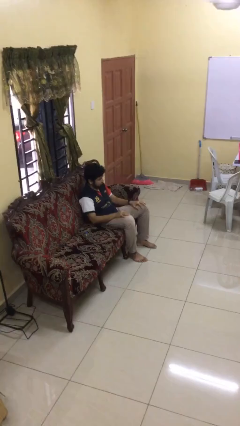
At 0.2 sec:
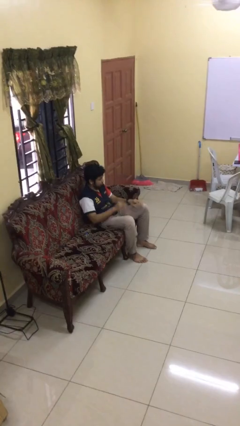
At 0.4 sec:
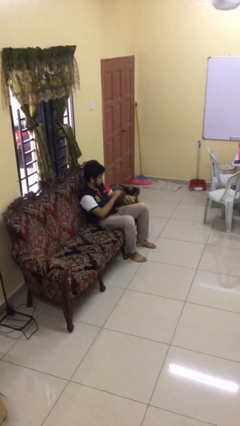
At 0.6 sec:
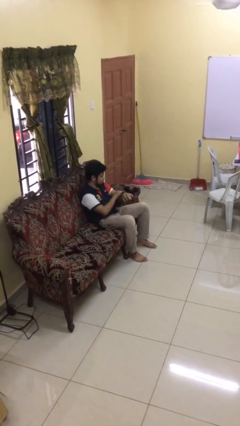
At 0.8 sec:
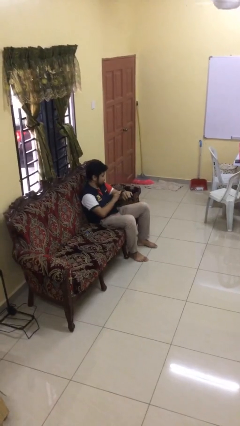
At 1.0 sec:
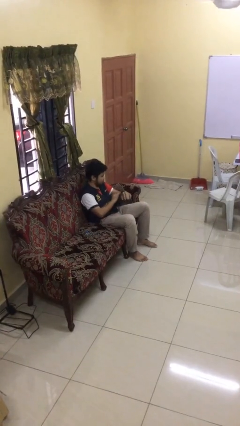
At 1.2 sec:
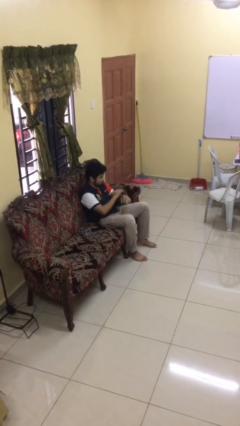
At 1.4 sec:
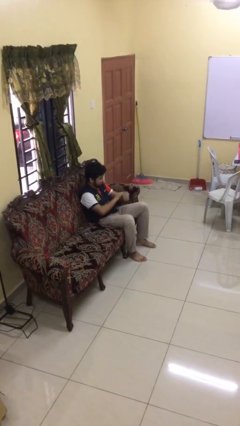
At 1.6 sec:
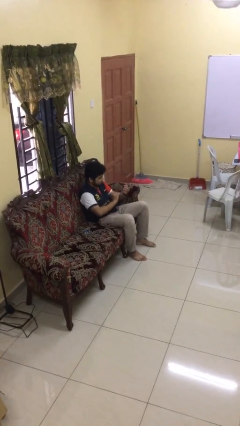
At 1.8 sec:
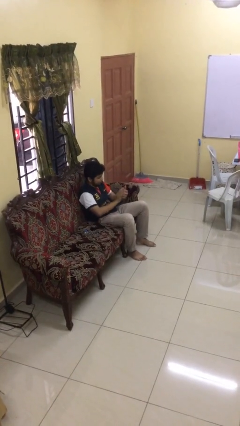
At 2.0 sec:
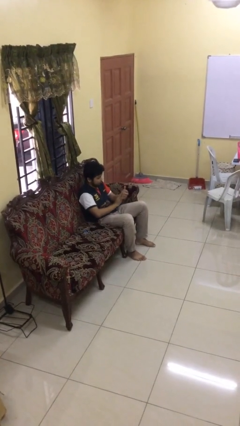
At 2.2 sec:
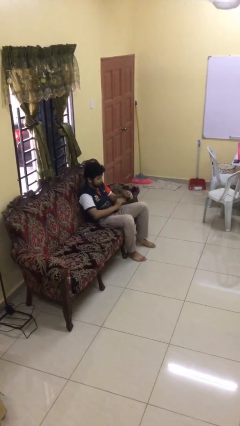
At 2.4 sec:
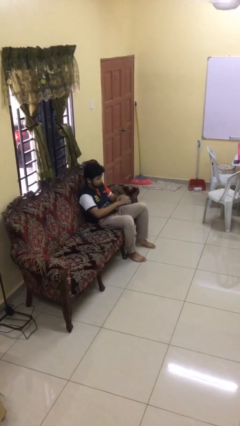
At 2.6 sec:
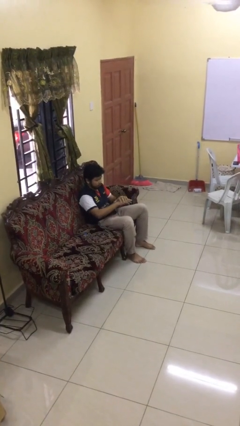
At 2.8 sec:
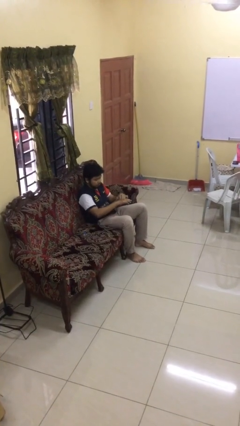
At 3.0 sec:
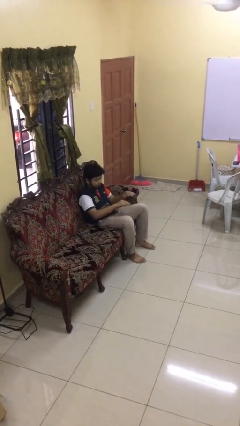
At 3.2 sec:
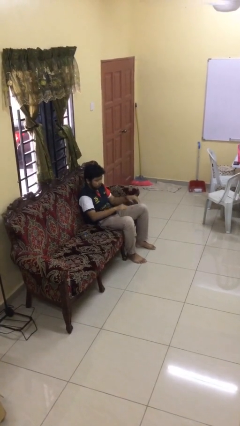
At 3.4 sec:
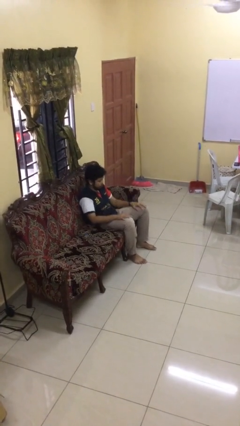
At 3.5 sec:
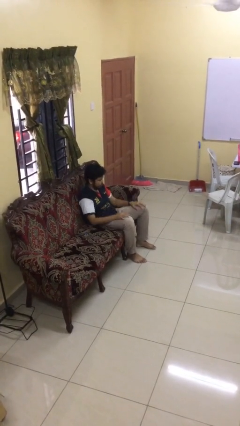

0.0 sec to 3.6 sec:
person looks at hands in lap

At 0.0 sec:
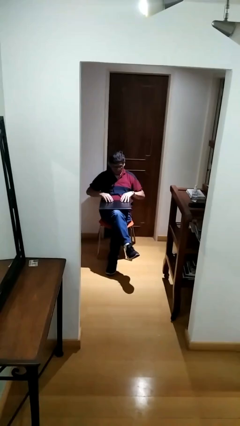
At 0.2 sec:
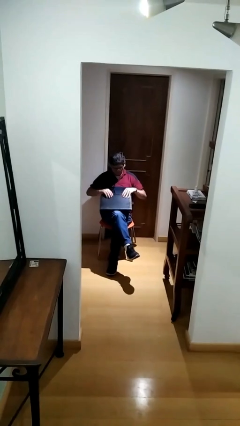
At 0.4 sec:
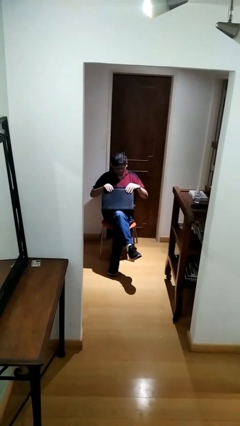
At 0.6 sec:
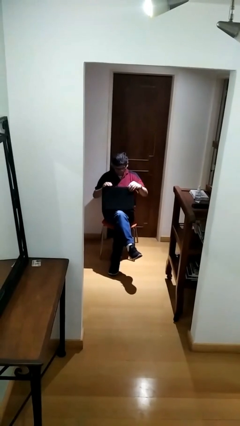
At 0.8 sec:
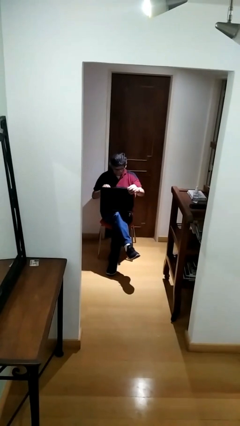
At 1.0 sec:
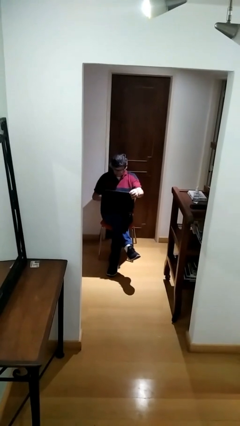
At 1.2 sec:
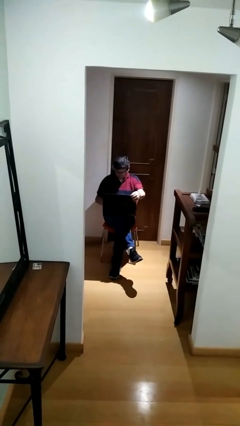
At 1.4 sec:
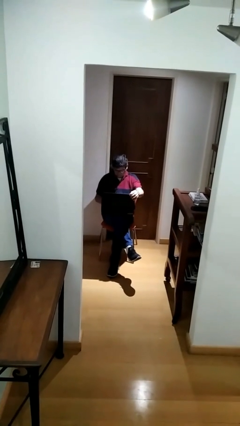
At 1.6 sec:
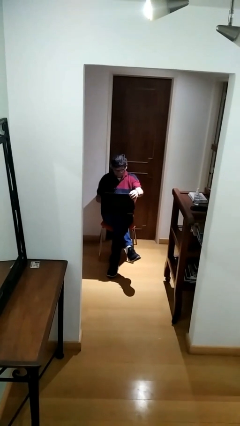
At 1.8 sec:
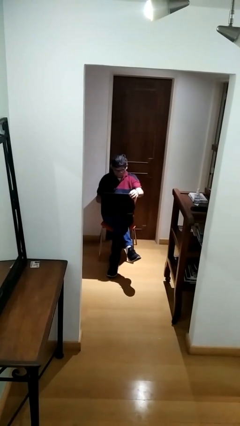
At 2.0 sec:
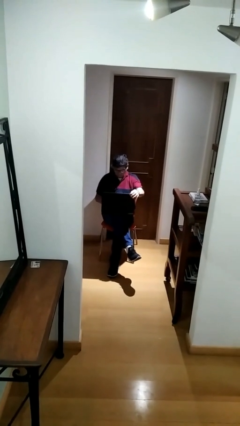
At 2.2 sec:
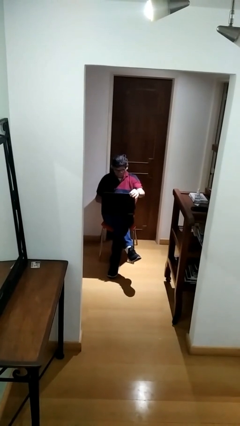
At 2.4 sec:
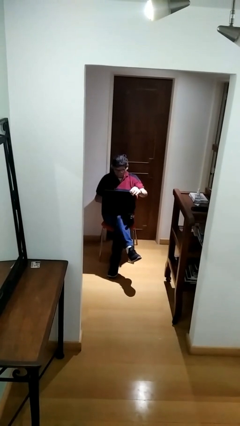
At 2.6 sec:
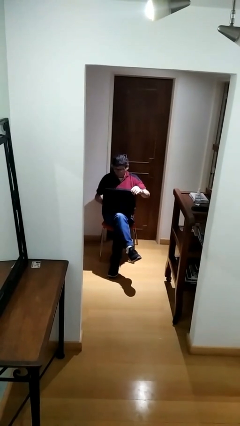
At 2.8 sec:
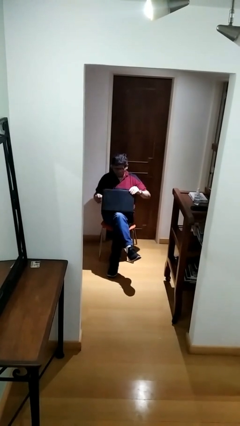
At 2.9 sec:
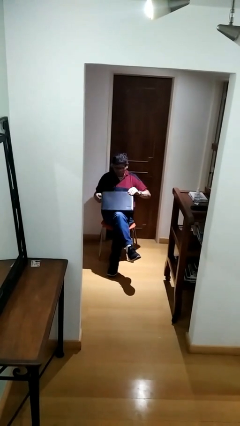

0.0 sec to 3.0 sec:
person interacts with laptop

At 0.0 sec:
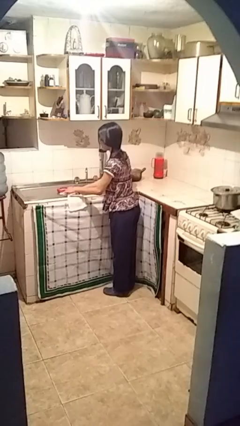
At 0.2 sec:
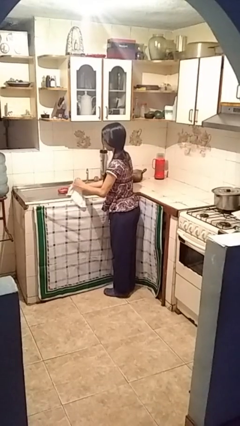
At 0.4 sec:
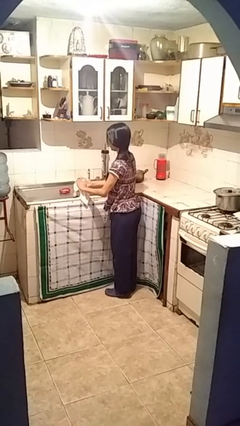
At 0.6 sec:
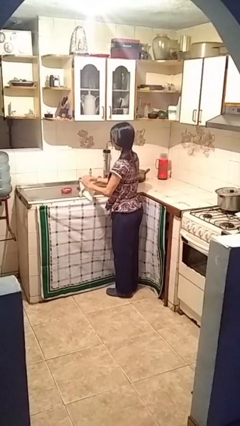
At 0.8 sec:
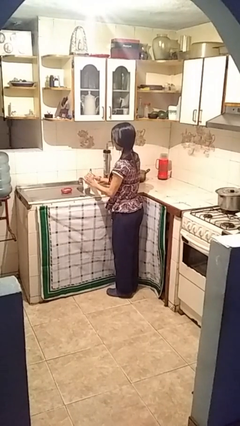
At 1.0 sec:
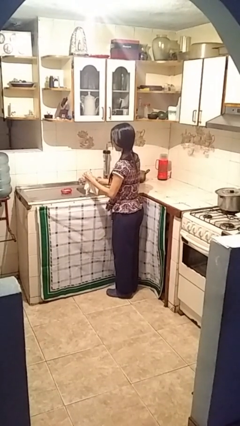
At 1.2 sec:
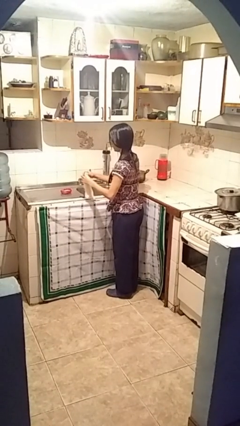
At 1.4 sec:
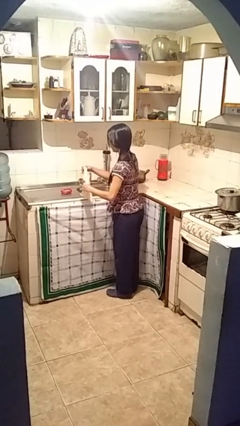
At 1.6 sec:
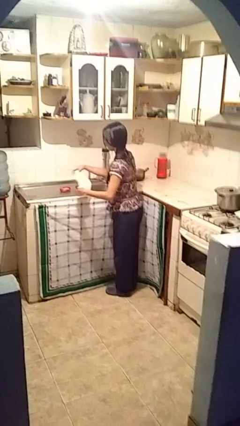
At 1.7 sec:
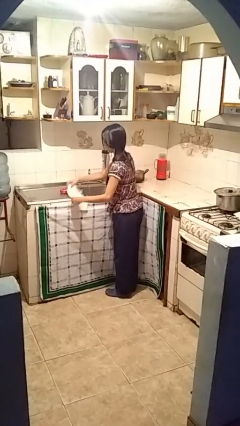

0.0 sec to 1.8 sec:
person dries hands with towel

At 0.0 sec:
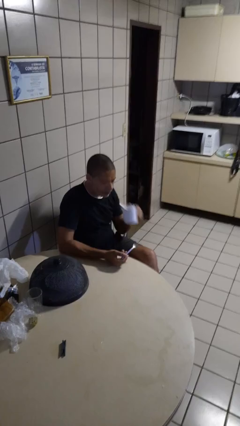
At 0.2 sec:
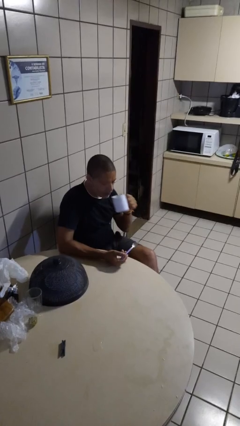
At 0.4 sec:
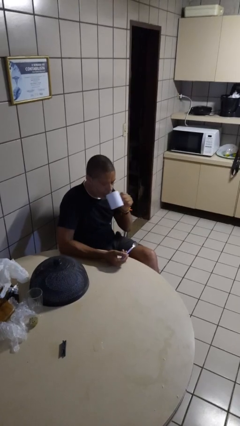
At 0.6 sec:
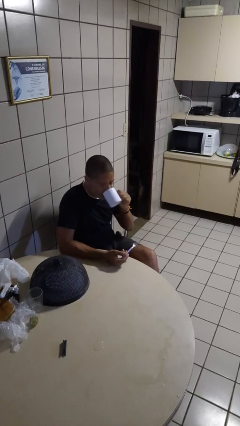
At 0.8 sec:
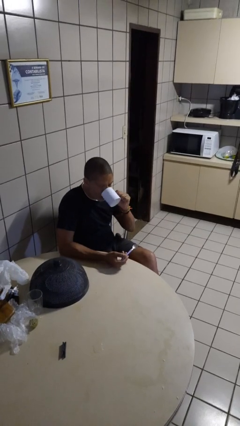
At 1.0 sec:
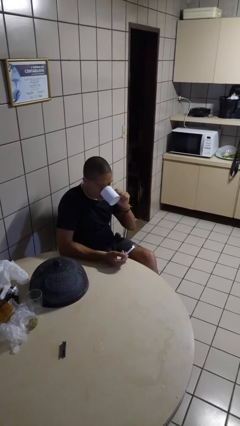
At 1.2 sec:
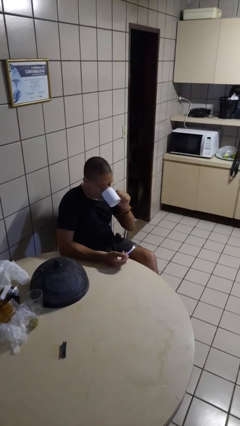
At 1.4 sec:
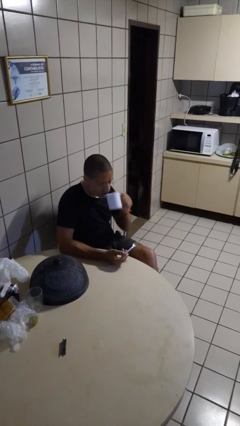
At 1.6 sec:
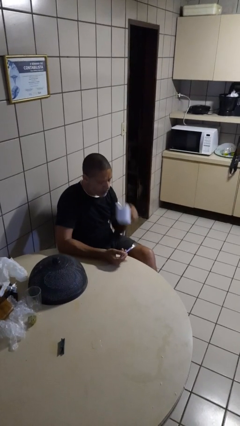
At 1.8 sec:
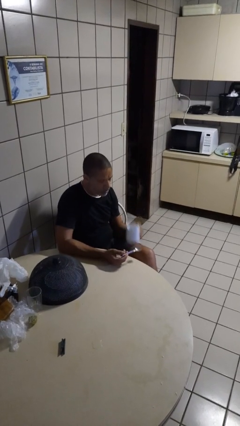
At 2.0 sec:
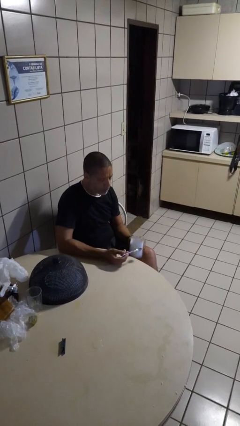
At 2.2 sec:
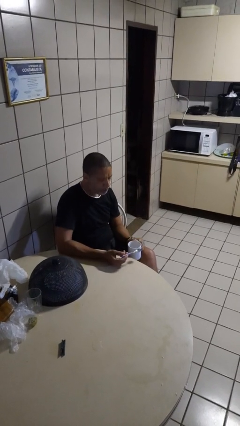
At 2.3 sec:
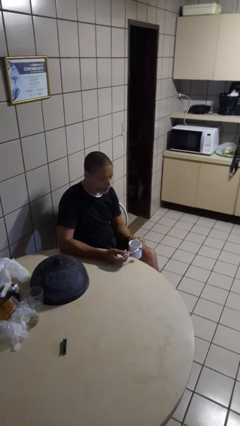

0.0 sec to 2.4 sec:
person drinks from mug

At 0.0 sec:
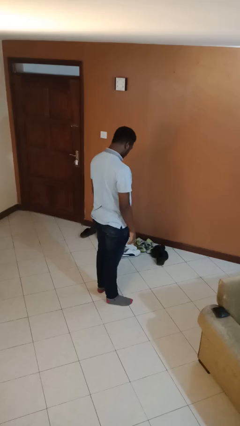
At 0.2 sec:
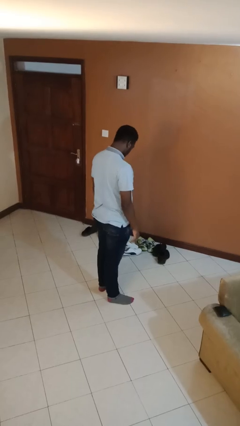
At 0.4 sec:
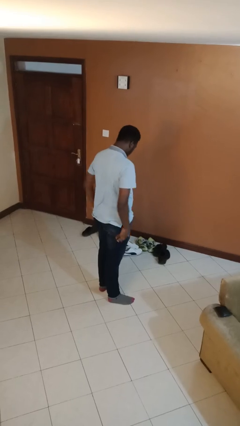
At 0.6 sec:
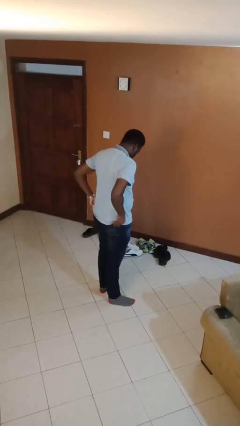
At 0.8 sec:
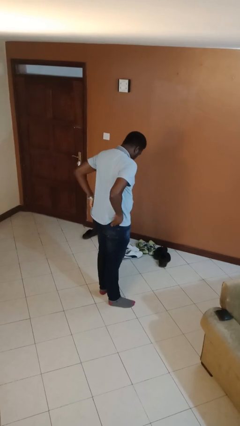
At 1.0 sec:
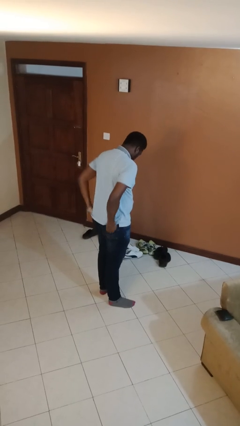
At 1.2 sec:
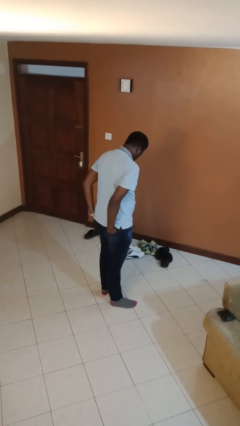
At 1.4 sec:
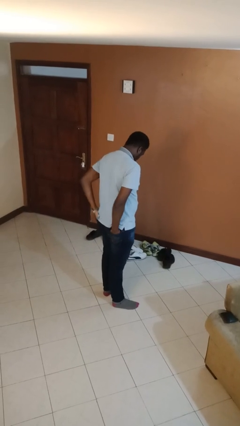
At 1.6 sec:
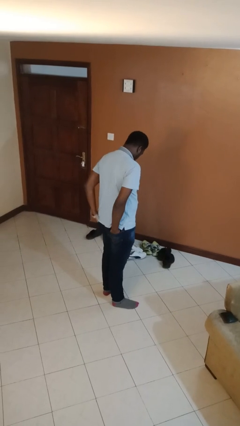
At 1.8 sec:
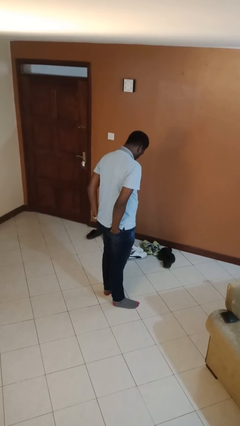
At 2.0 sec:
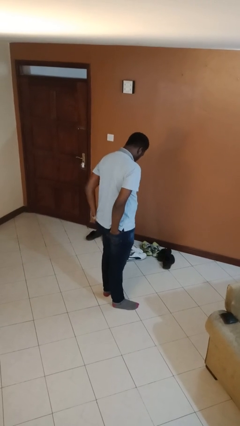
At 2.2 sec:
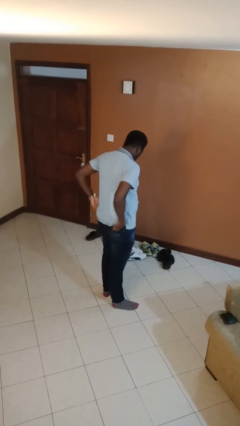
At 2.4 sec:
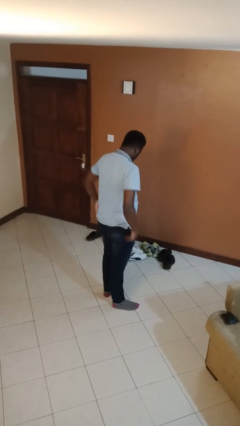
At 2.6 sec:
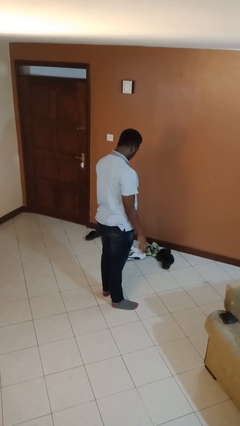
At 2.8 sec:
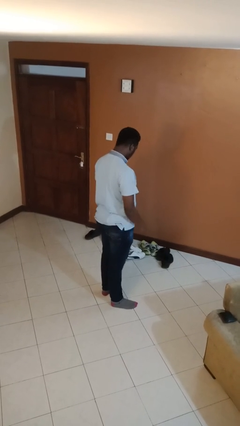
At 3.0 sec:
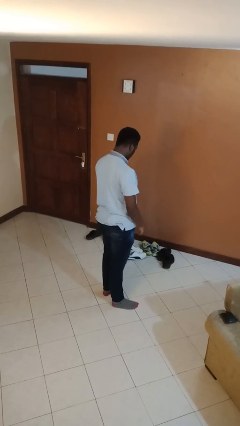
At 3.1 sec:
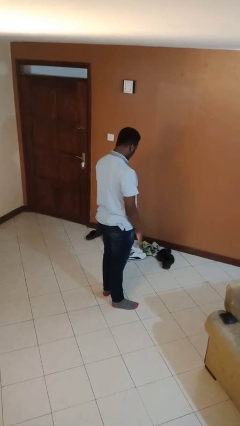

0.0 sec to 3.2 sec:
person puts hands in back pockets

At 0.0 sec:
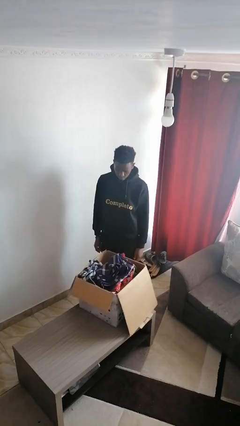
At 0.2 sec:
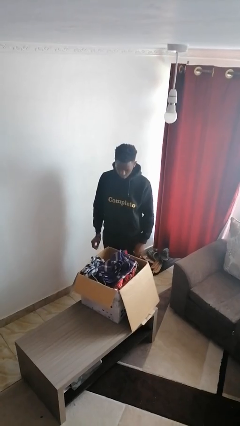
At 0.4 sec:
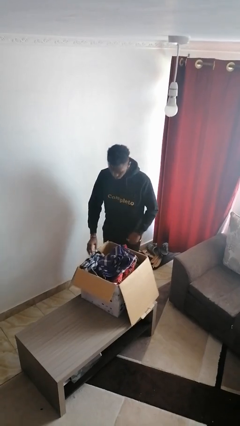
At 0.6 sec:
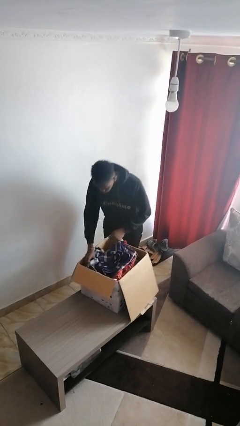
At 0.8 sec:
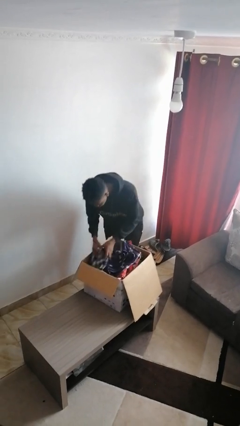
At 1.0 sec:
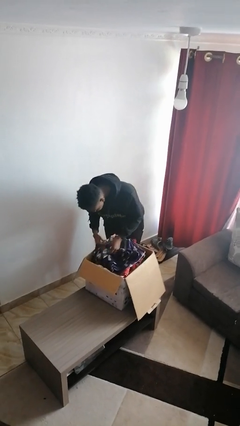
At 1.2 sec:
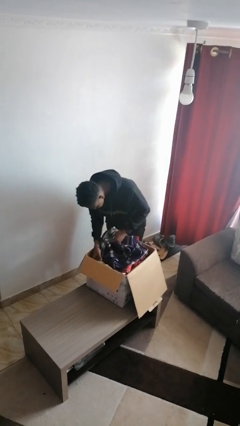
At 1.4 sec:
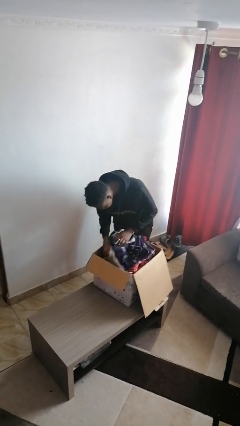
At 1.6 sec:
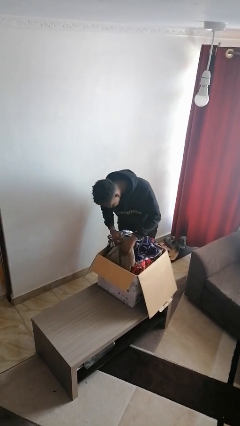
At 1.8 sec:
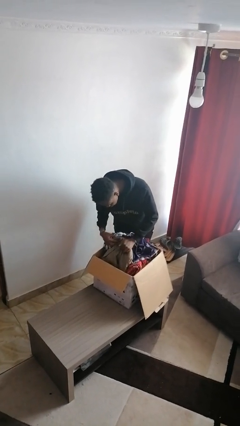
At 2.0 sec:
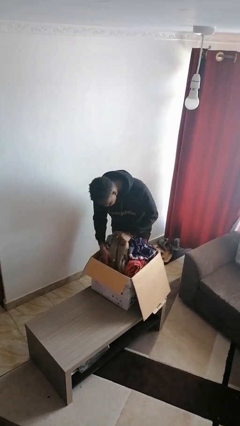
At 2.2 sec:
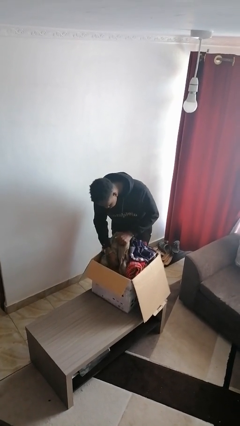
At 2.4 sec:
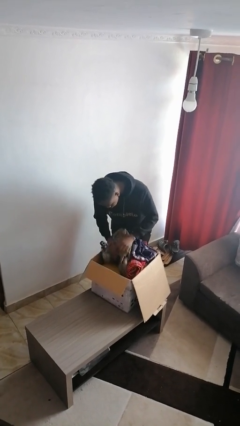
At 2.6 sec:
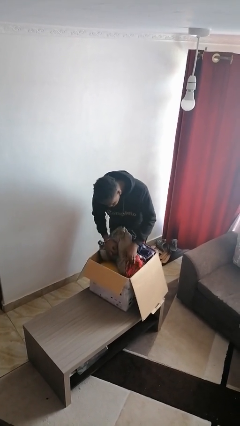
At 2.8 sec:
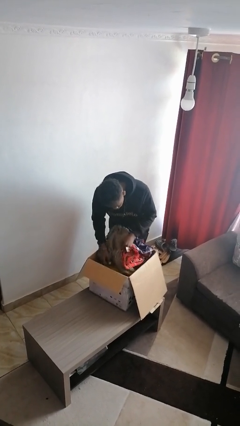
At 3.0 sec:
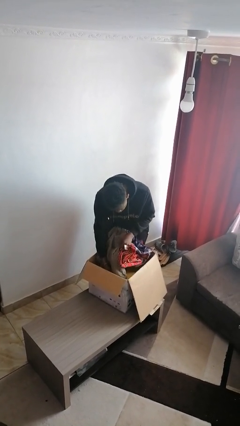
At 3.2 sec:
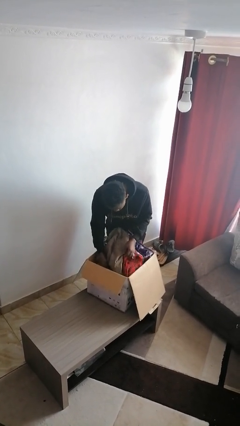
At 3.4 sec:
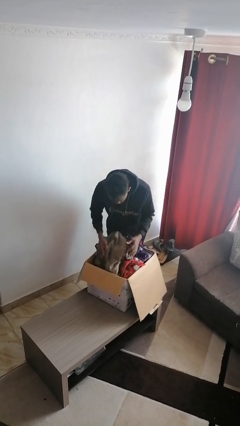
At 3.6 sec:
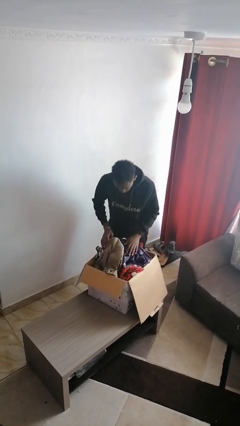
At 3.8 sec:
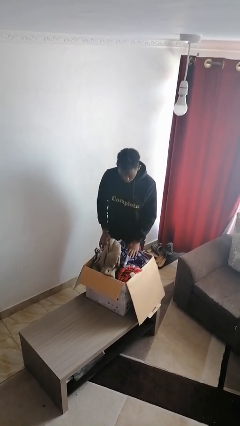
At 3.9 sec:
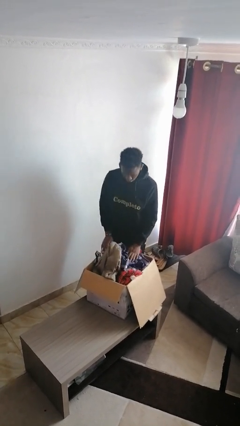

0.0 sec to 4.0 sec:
person searches in box
